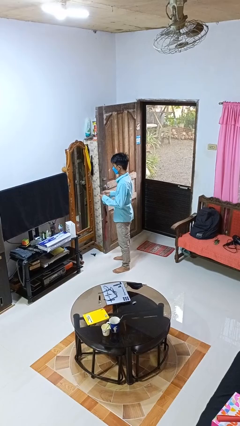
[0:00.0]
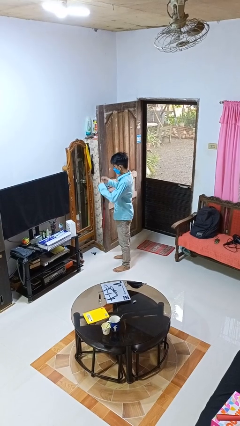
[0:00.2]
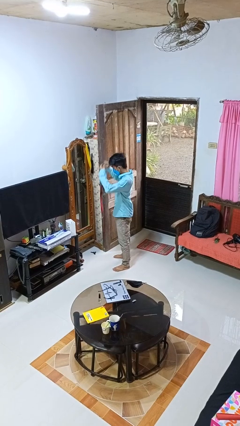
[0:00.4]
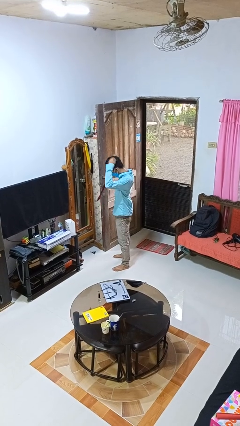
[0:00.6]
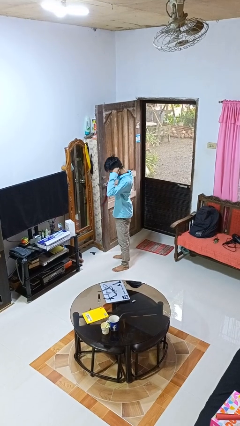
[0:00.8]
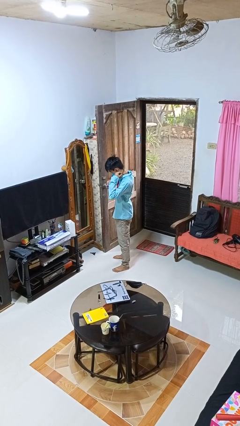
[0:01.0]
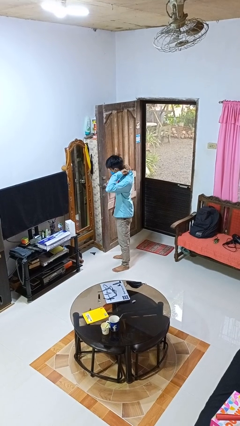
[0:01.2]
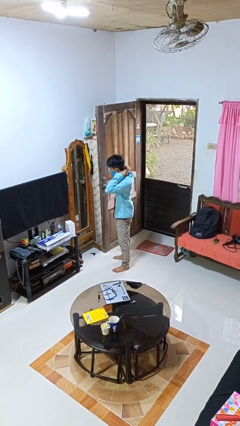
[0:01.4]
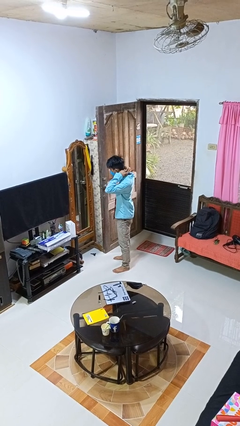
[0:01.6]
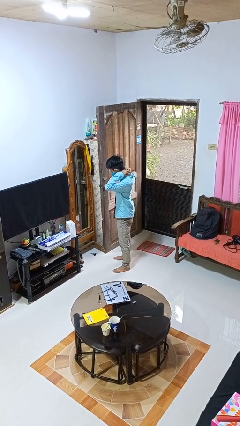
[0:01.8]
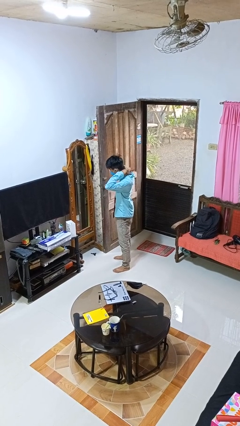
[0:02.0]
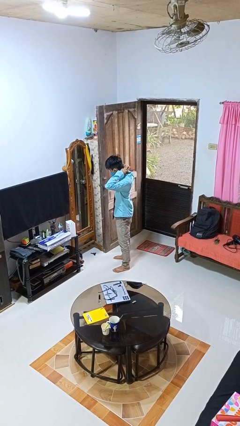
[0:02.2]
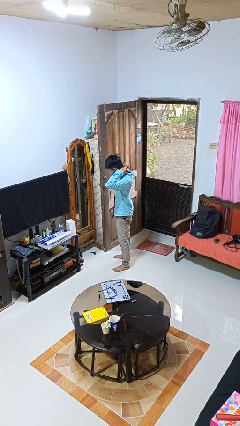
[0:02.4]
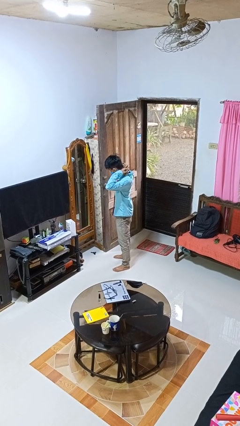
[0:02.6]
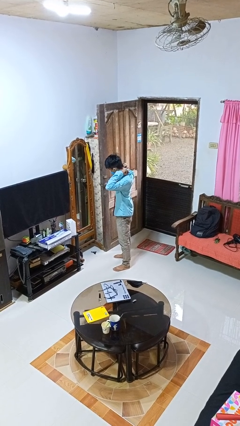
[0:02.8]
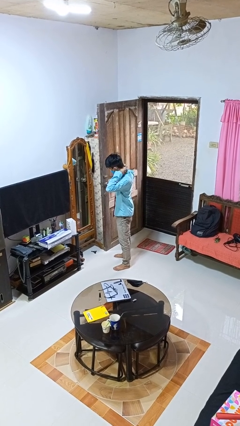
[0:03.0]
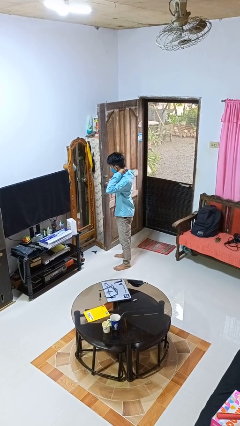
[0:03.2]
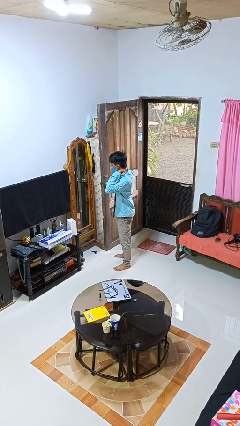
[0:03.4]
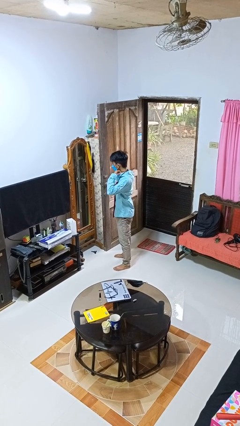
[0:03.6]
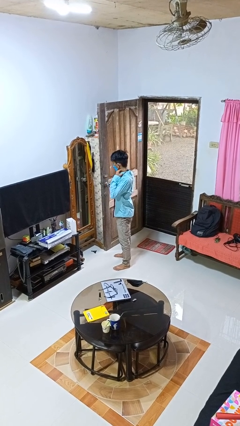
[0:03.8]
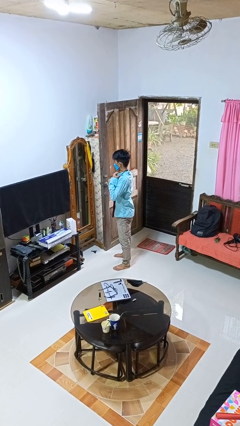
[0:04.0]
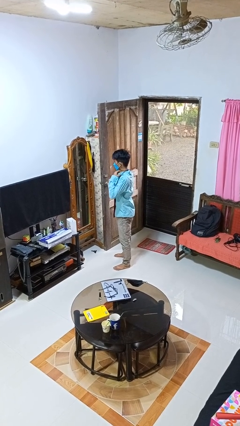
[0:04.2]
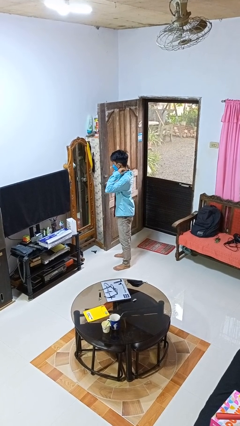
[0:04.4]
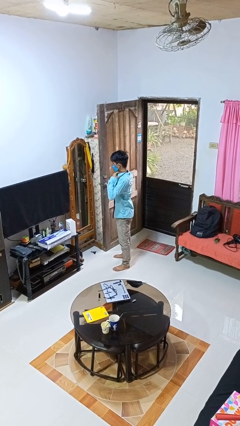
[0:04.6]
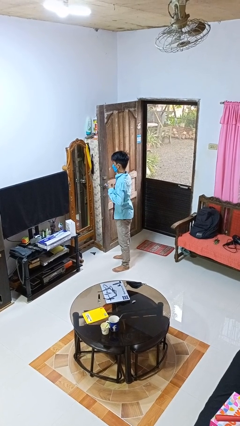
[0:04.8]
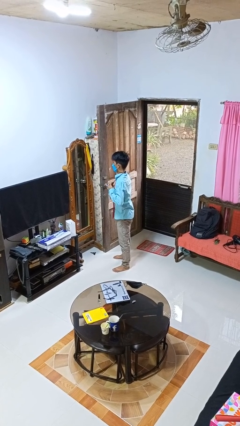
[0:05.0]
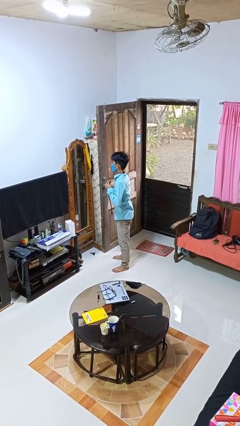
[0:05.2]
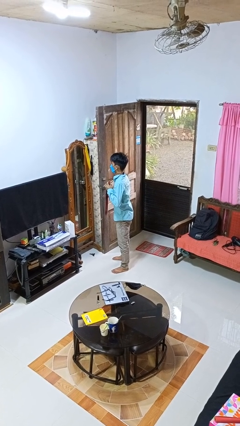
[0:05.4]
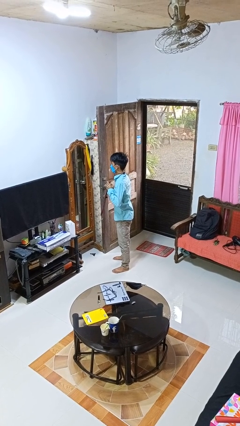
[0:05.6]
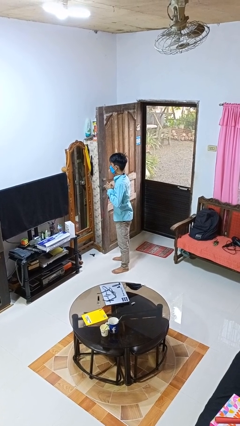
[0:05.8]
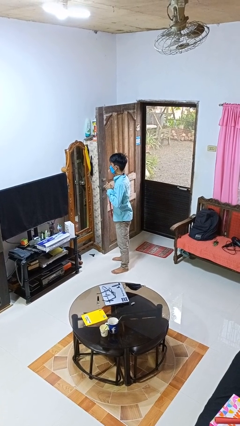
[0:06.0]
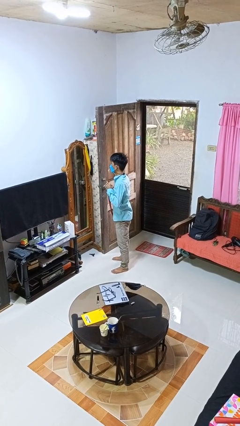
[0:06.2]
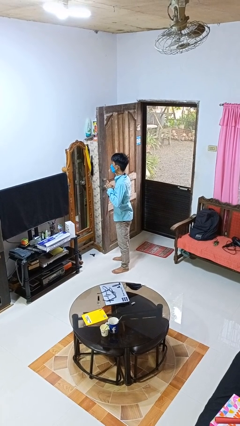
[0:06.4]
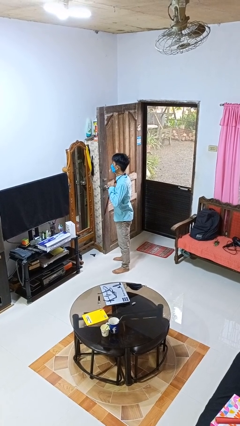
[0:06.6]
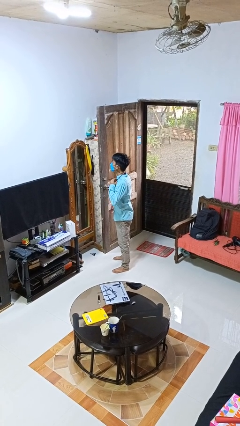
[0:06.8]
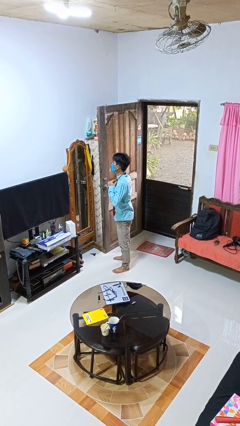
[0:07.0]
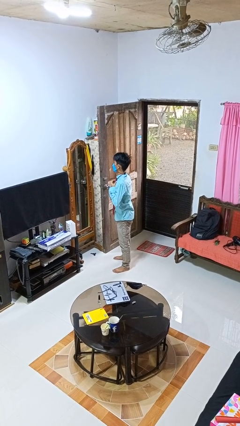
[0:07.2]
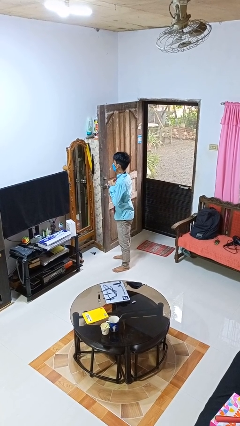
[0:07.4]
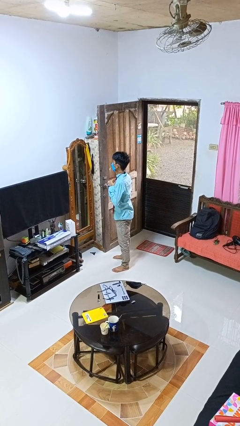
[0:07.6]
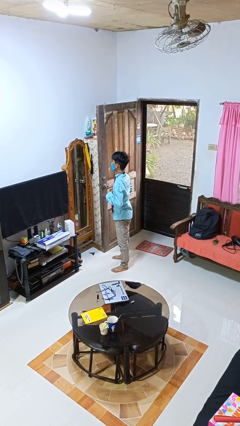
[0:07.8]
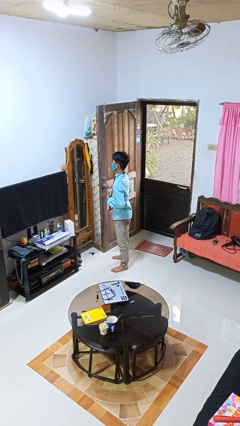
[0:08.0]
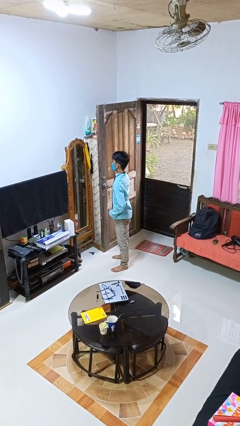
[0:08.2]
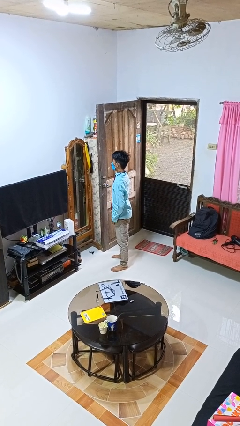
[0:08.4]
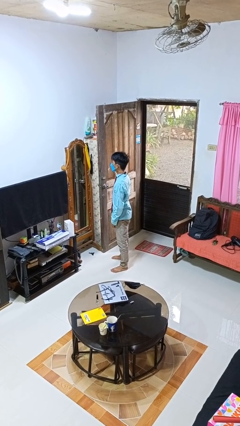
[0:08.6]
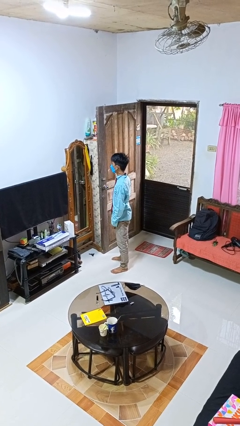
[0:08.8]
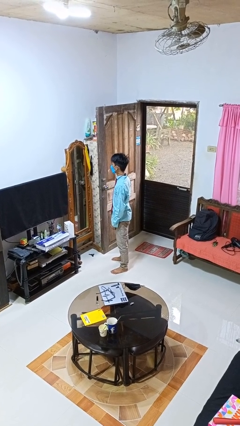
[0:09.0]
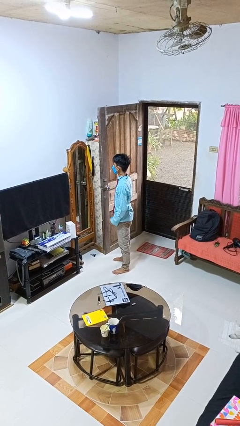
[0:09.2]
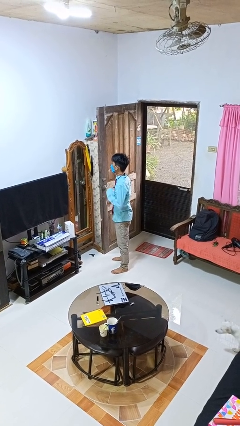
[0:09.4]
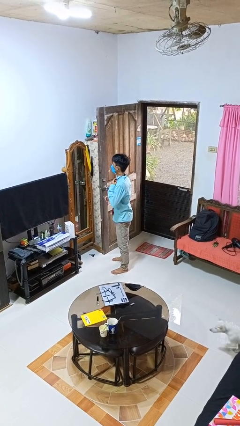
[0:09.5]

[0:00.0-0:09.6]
person puts on necktie

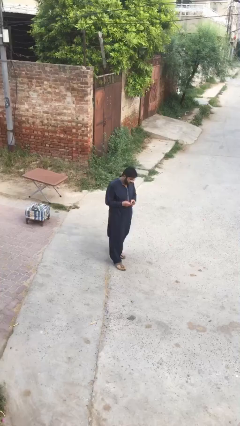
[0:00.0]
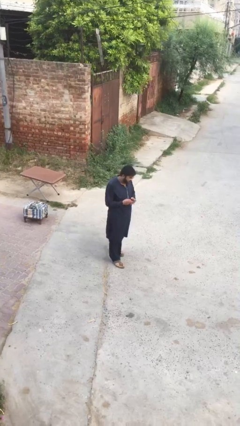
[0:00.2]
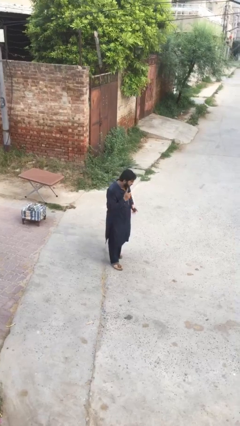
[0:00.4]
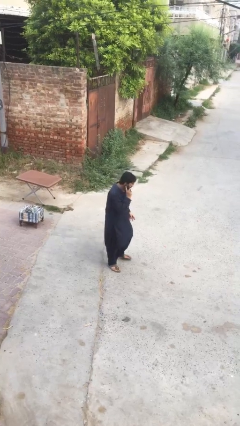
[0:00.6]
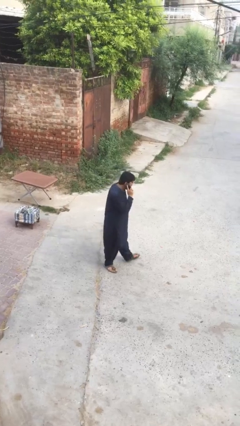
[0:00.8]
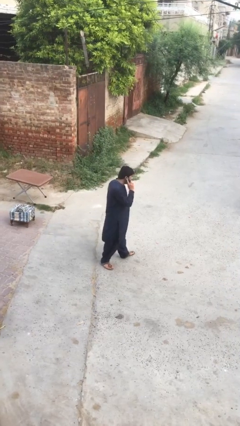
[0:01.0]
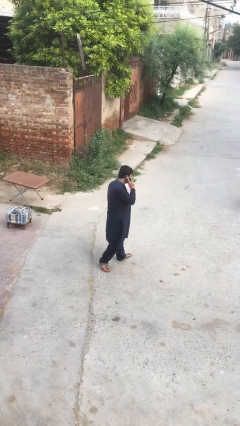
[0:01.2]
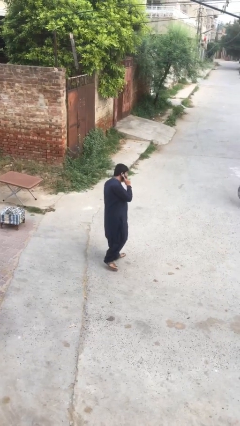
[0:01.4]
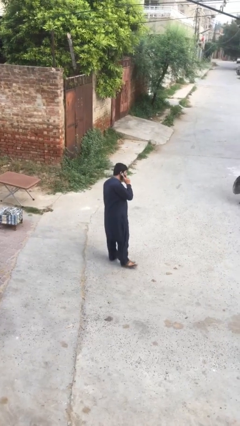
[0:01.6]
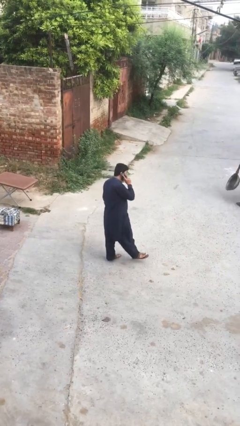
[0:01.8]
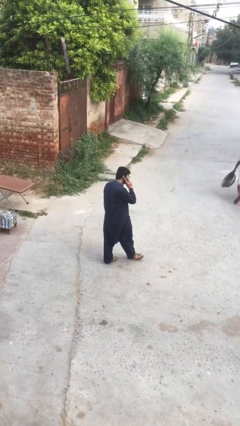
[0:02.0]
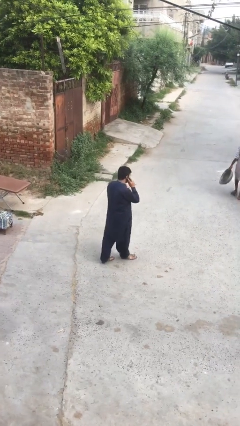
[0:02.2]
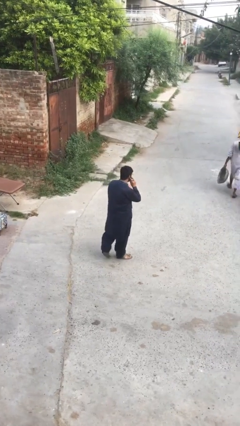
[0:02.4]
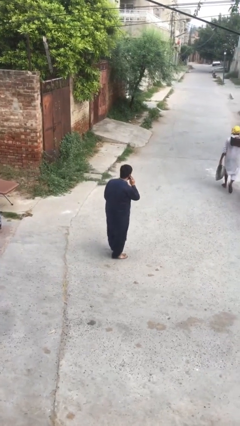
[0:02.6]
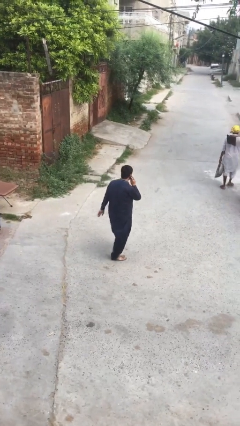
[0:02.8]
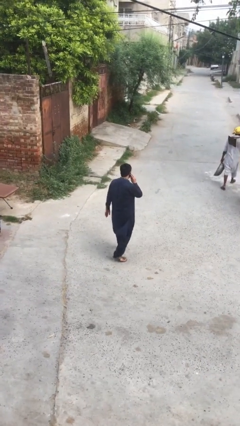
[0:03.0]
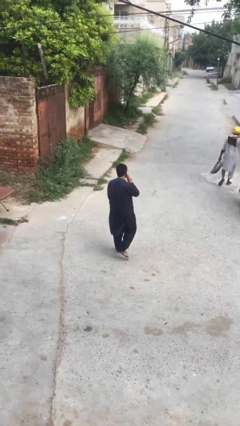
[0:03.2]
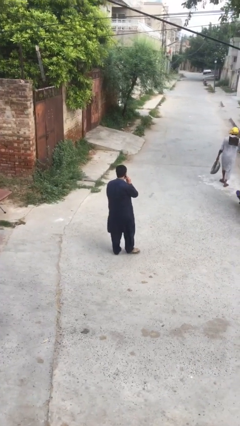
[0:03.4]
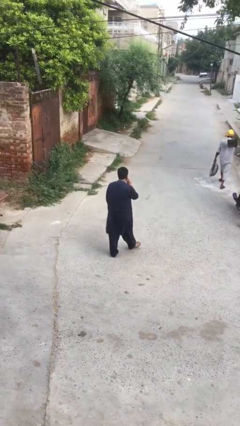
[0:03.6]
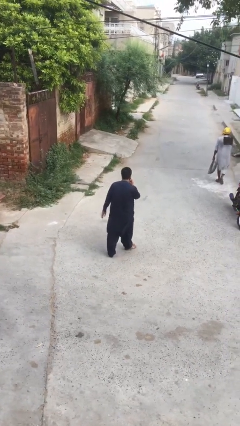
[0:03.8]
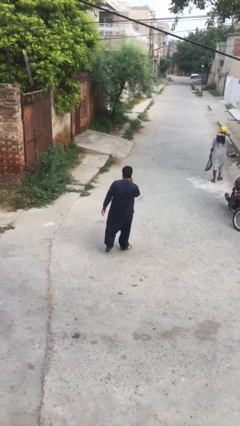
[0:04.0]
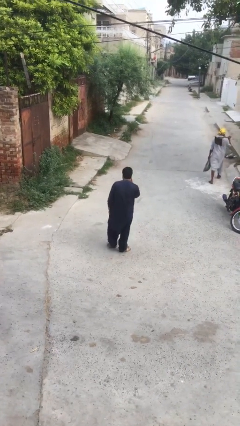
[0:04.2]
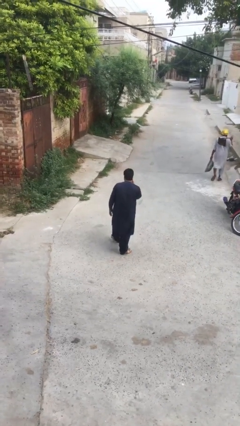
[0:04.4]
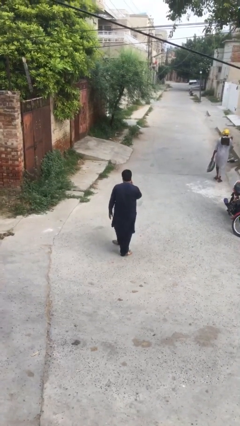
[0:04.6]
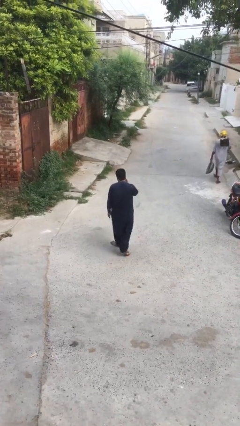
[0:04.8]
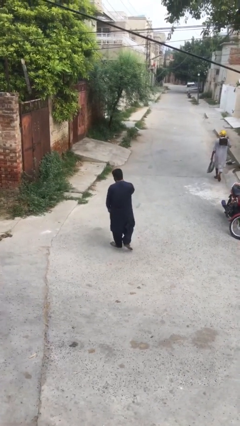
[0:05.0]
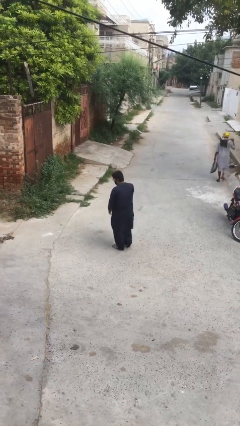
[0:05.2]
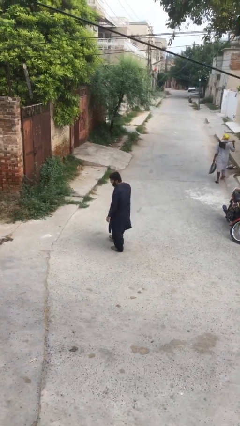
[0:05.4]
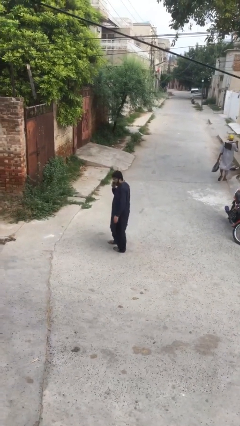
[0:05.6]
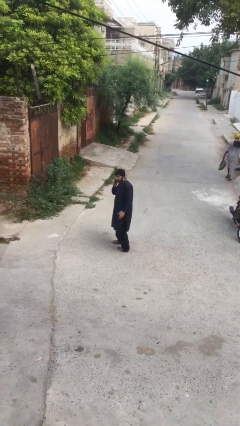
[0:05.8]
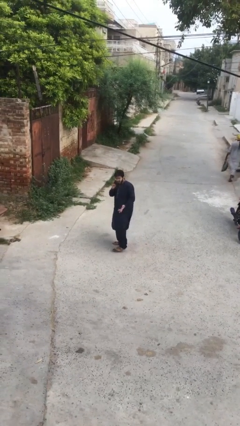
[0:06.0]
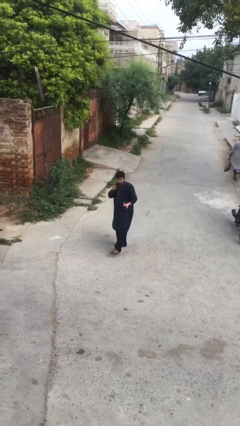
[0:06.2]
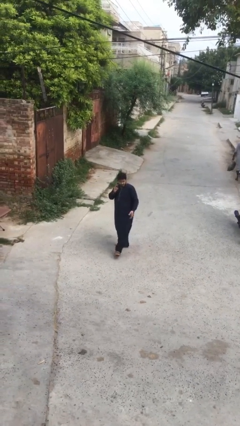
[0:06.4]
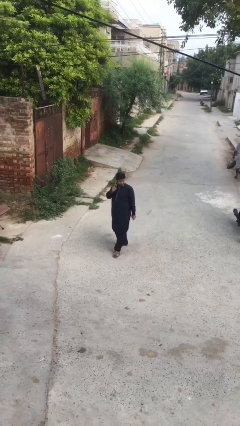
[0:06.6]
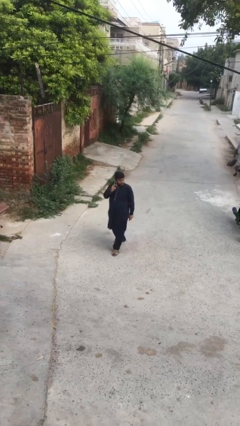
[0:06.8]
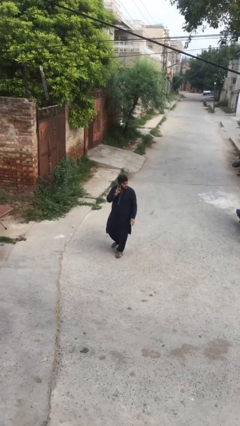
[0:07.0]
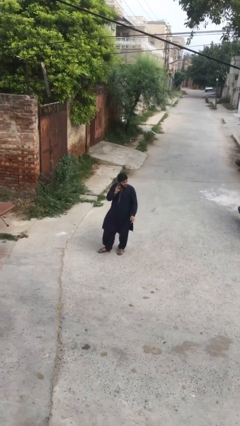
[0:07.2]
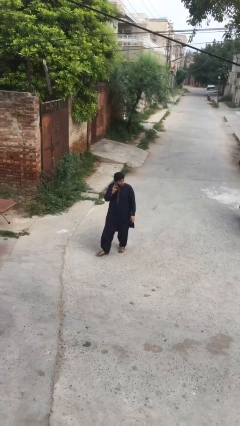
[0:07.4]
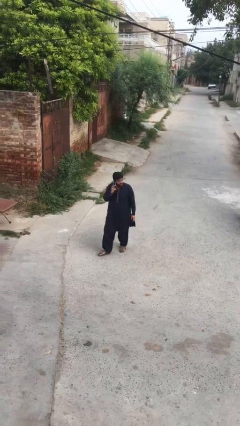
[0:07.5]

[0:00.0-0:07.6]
person talks on phone

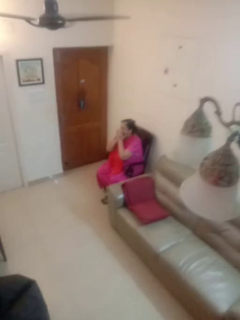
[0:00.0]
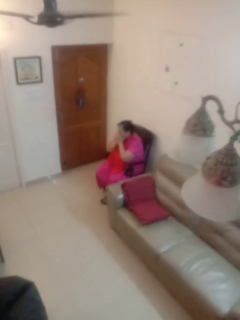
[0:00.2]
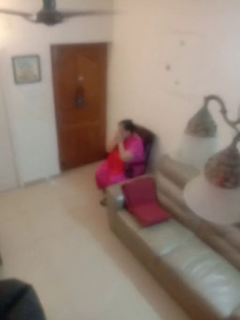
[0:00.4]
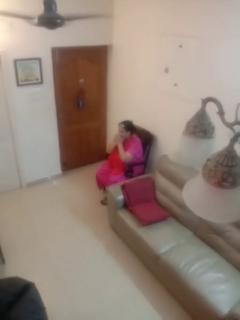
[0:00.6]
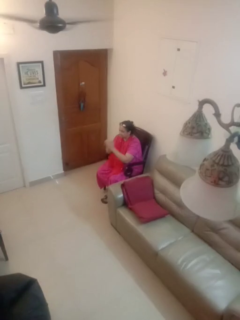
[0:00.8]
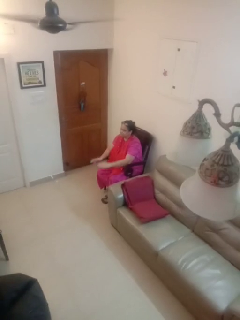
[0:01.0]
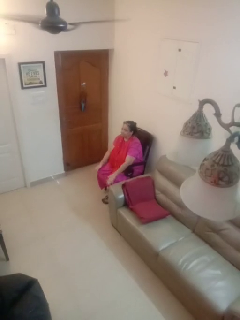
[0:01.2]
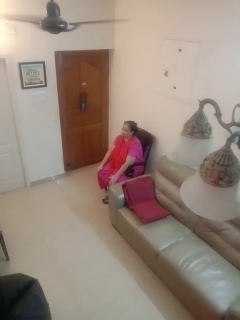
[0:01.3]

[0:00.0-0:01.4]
person sneezes into hand
